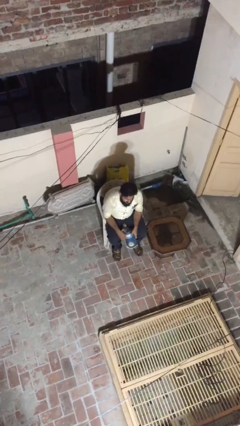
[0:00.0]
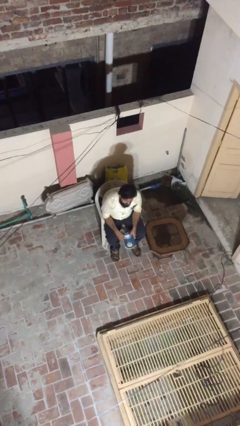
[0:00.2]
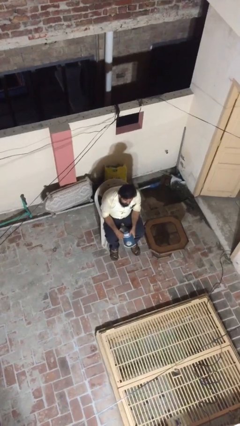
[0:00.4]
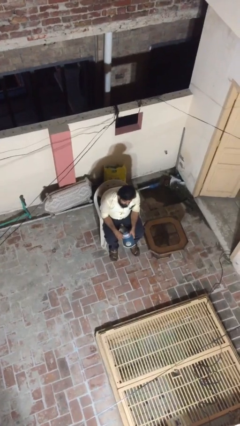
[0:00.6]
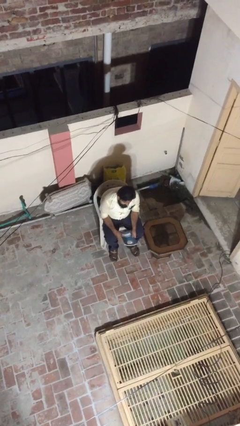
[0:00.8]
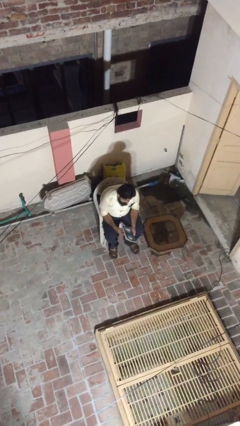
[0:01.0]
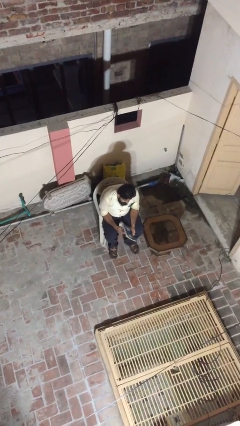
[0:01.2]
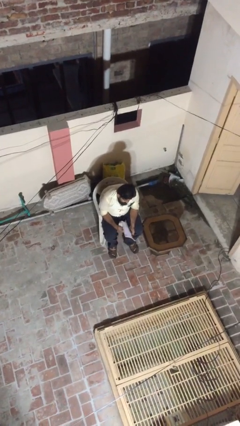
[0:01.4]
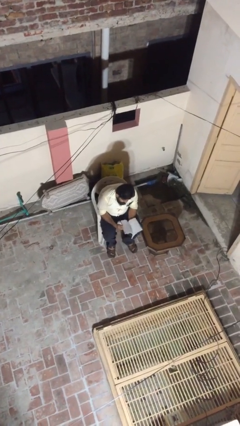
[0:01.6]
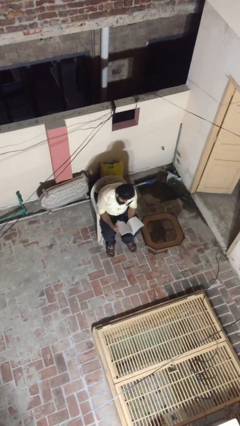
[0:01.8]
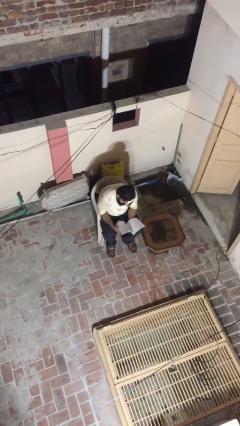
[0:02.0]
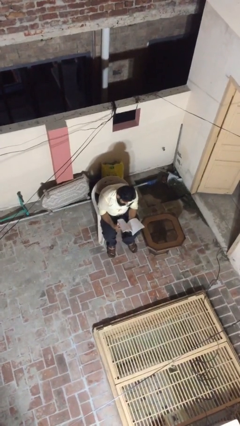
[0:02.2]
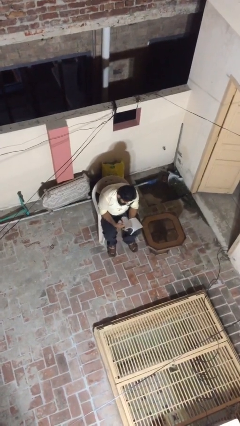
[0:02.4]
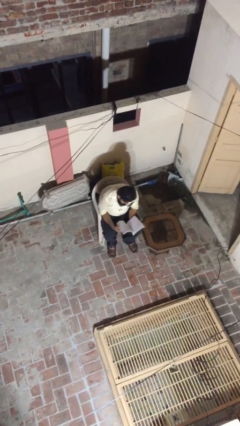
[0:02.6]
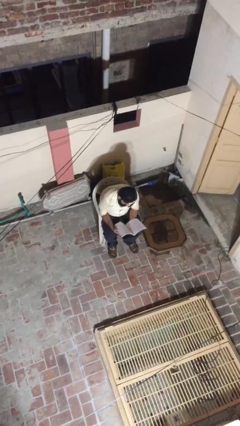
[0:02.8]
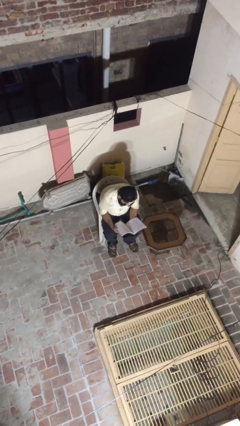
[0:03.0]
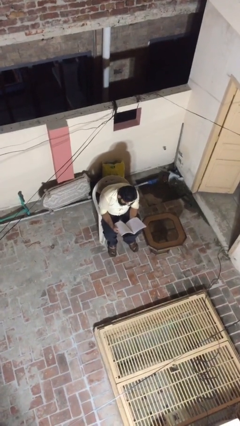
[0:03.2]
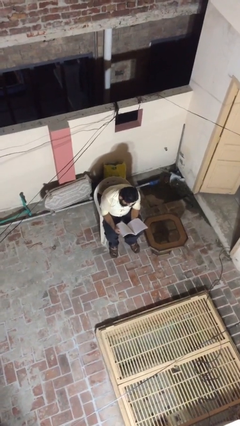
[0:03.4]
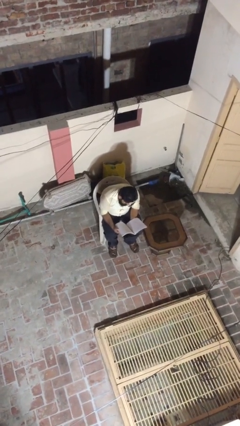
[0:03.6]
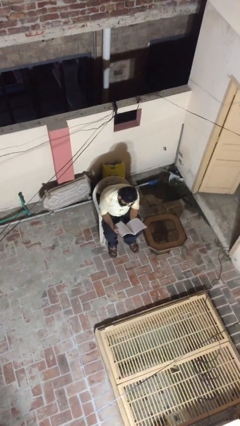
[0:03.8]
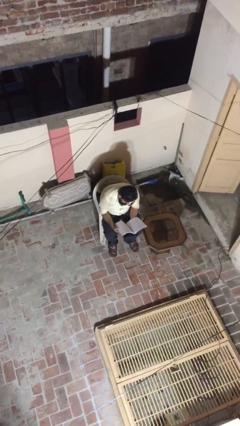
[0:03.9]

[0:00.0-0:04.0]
person reads document

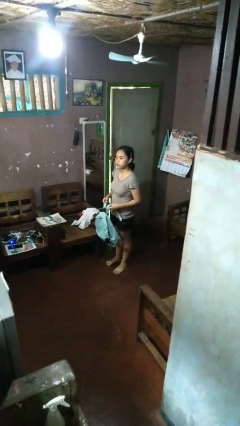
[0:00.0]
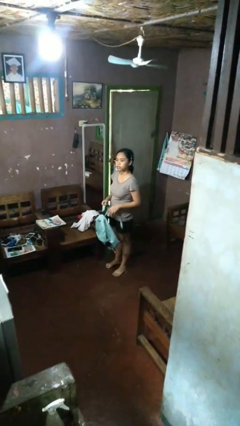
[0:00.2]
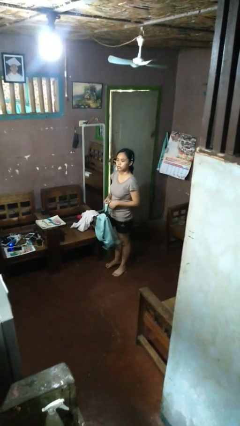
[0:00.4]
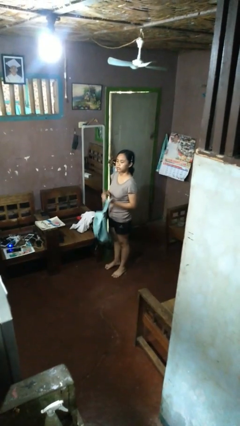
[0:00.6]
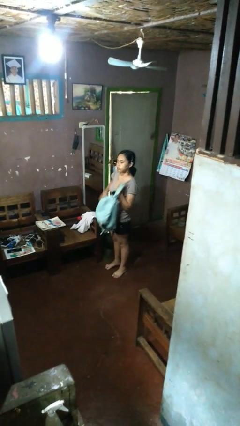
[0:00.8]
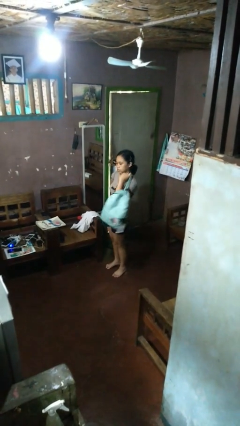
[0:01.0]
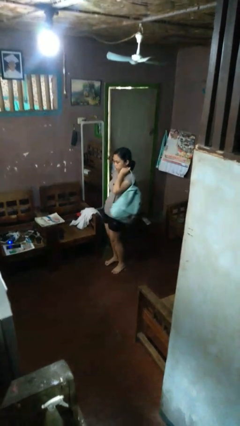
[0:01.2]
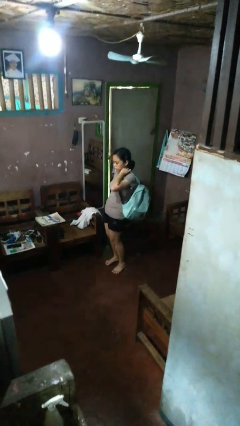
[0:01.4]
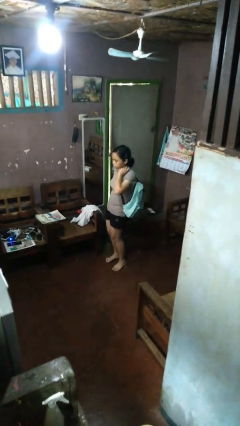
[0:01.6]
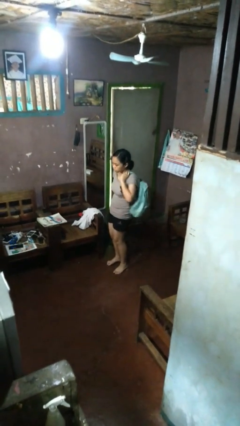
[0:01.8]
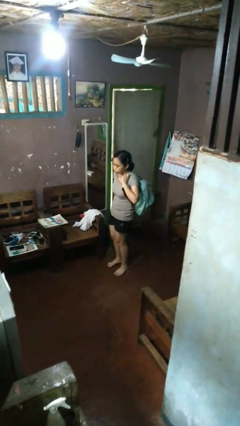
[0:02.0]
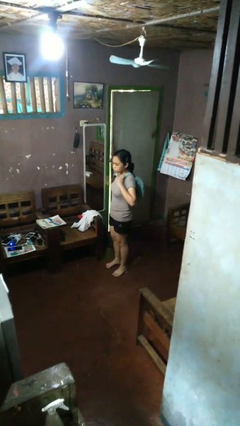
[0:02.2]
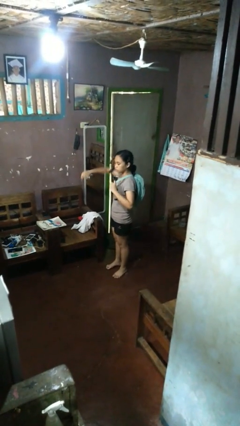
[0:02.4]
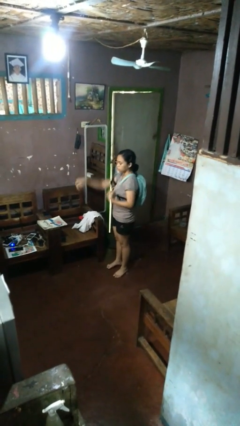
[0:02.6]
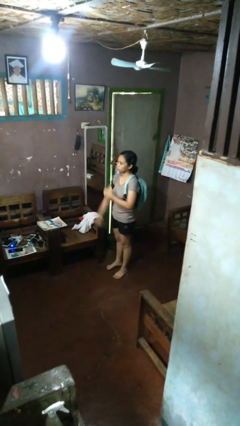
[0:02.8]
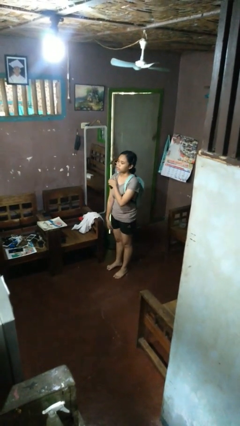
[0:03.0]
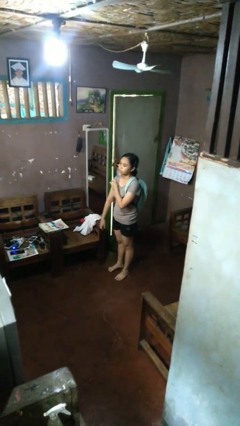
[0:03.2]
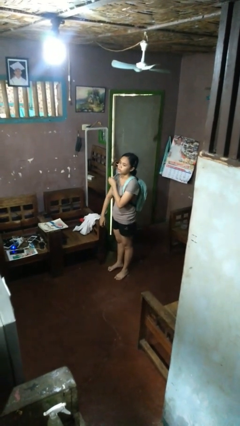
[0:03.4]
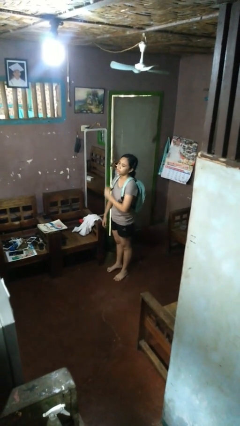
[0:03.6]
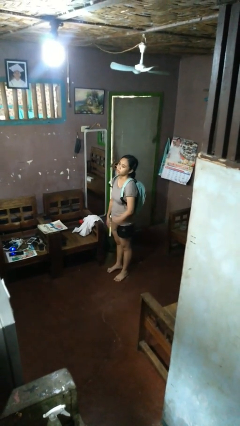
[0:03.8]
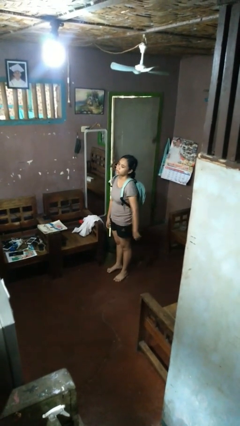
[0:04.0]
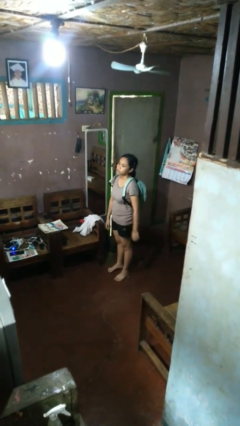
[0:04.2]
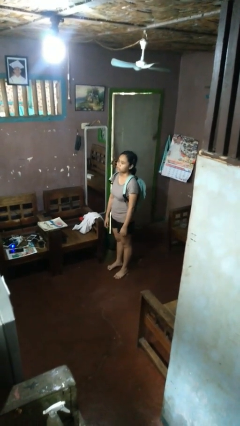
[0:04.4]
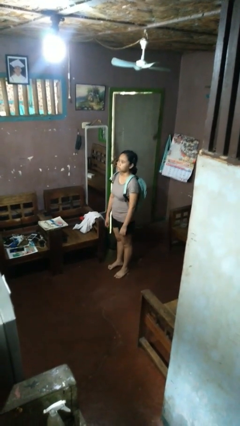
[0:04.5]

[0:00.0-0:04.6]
person puts on backpack

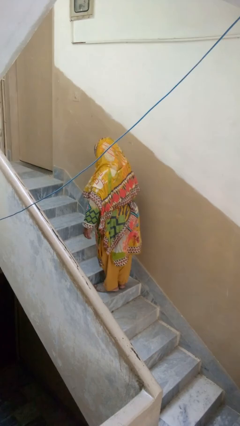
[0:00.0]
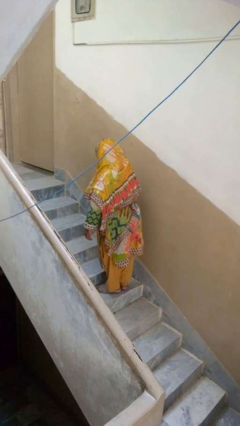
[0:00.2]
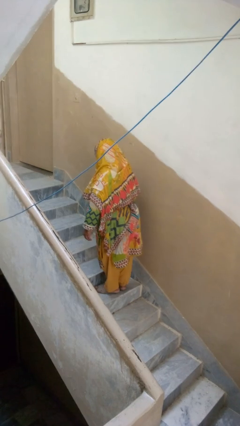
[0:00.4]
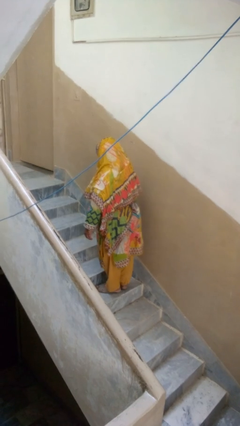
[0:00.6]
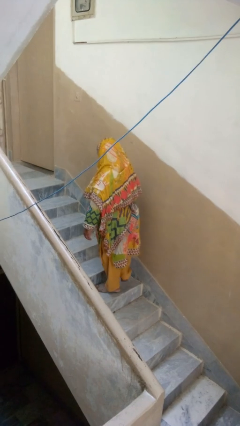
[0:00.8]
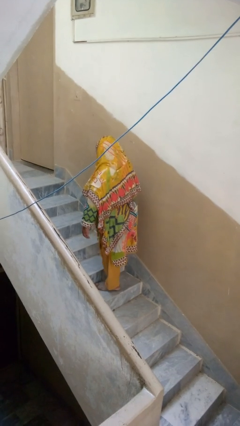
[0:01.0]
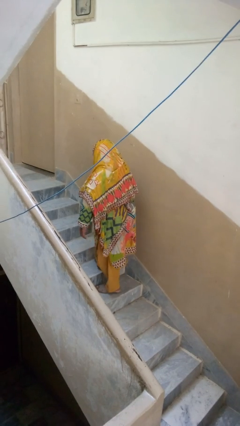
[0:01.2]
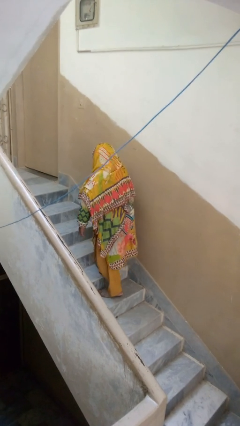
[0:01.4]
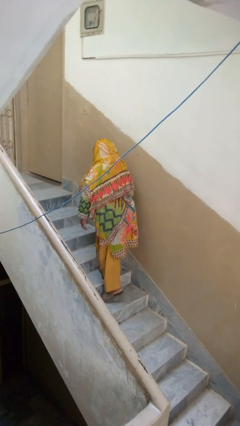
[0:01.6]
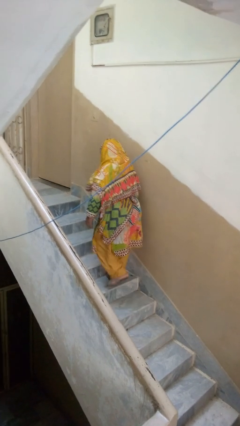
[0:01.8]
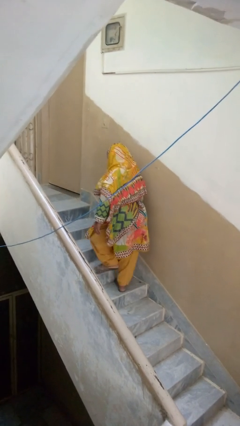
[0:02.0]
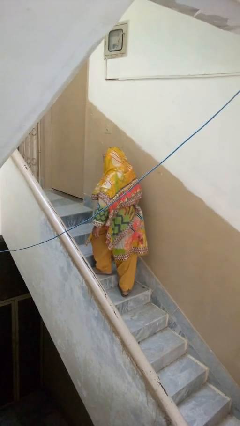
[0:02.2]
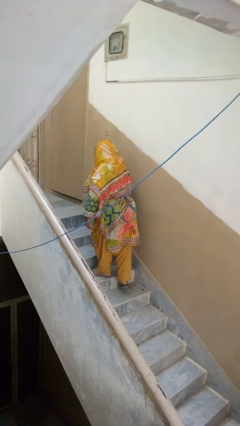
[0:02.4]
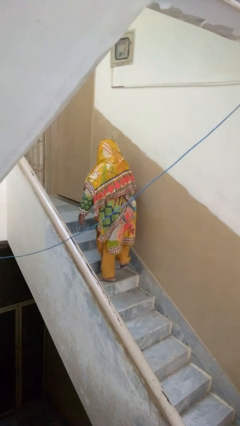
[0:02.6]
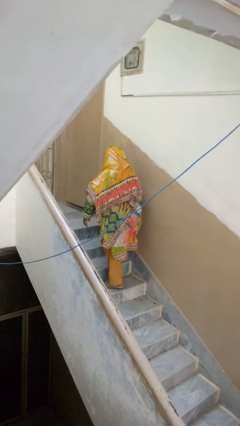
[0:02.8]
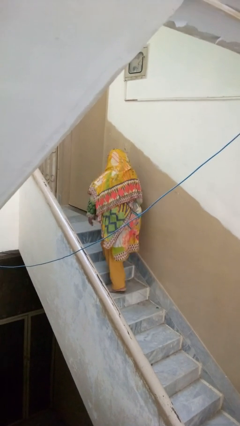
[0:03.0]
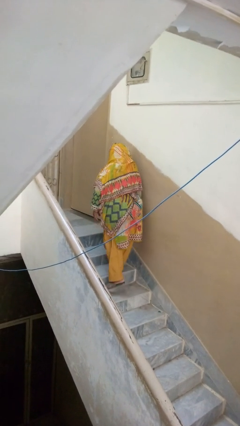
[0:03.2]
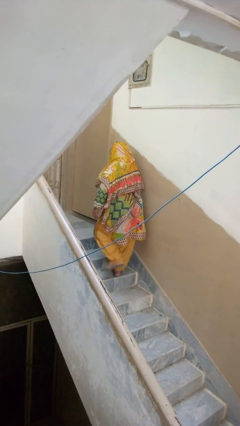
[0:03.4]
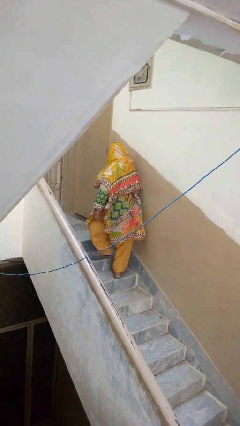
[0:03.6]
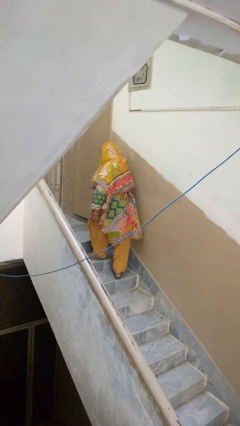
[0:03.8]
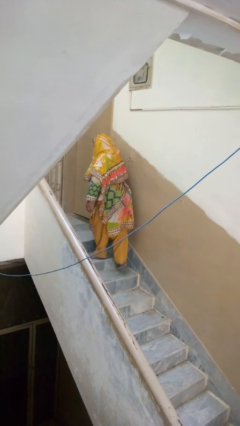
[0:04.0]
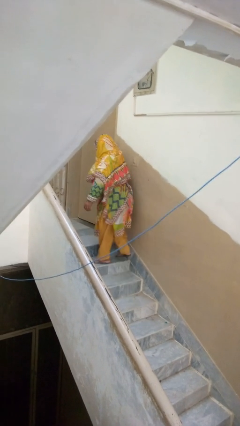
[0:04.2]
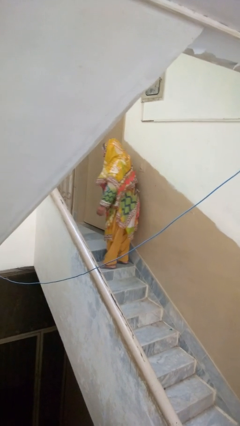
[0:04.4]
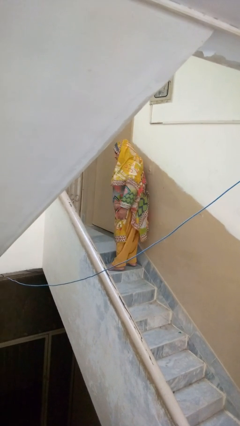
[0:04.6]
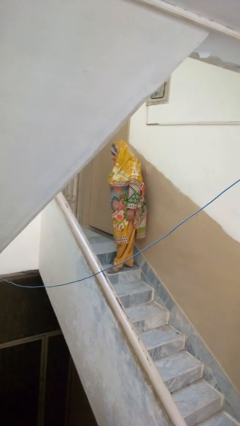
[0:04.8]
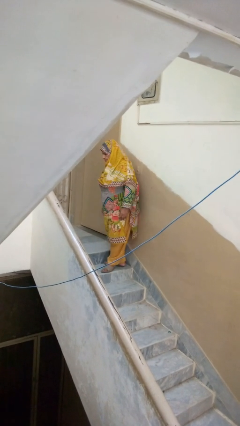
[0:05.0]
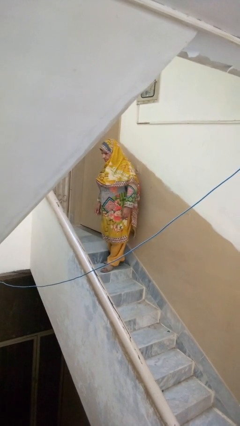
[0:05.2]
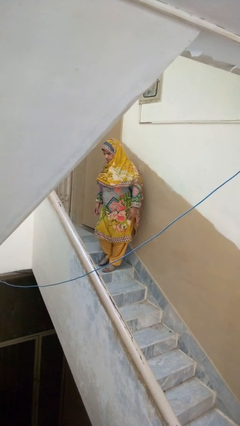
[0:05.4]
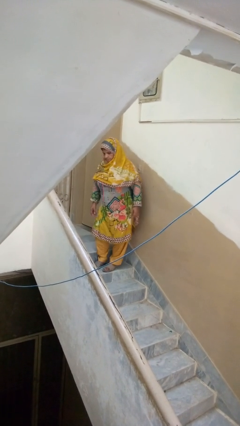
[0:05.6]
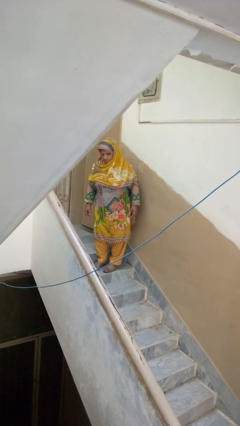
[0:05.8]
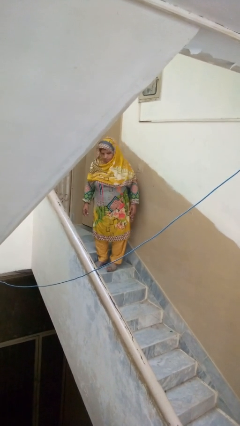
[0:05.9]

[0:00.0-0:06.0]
person climbs up stairs

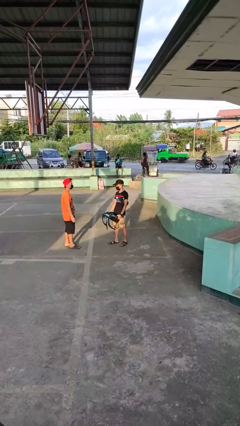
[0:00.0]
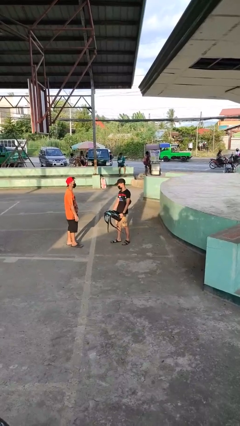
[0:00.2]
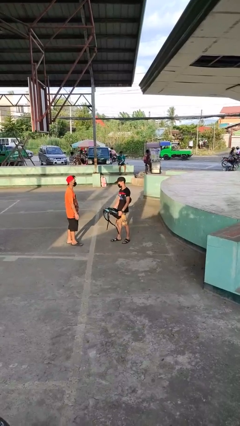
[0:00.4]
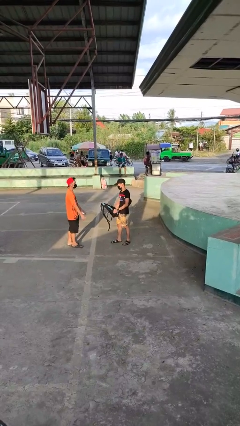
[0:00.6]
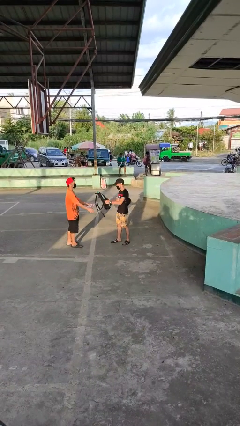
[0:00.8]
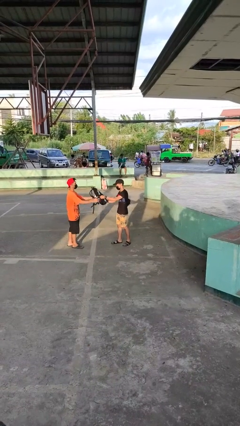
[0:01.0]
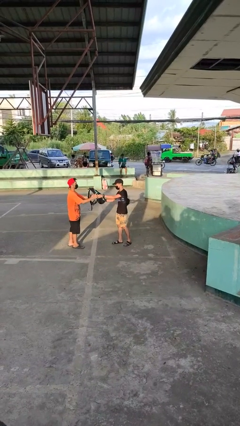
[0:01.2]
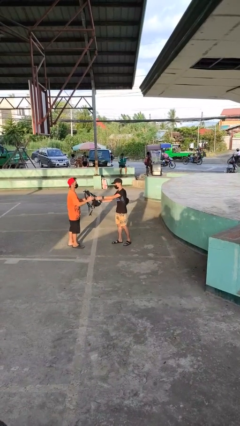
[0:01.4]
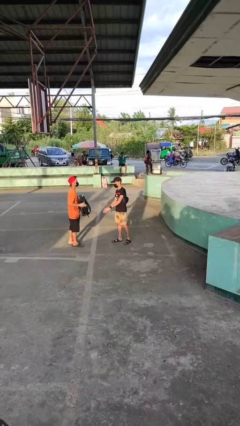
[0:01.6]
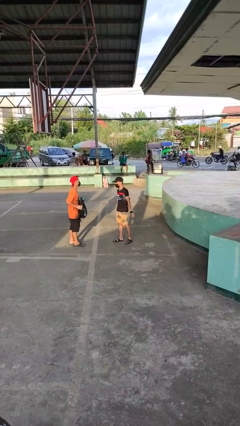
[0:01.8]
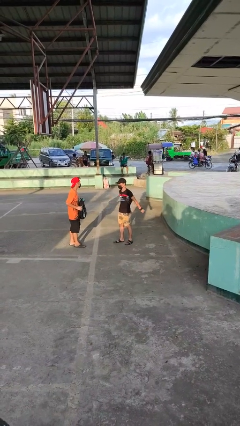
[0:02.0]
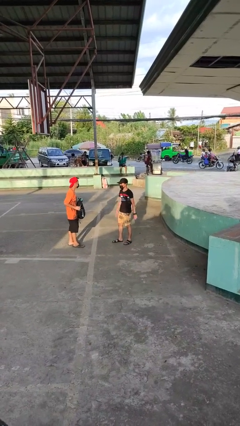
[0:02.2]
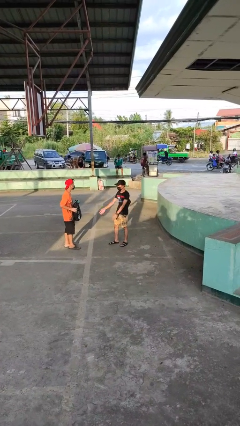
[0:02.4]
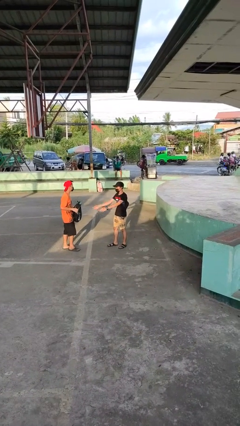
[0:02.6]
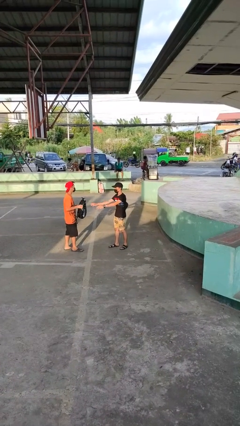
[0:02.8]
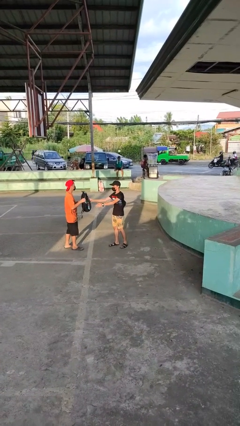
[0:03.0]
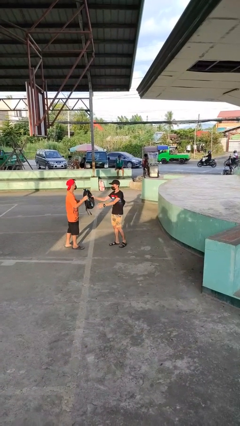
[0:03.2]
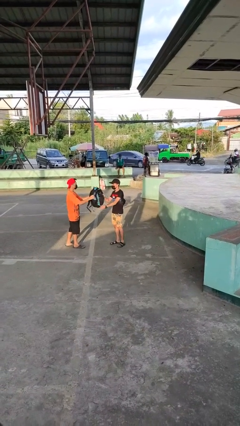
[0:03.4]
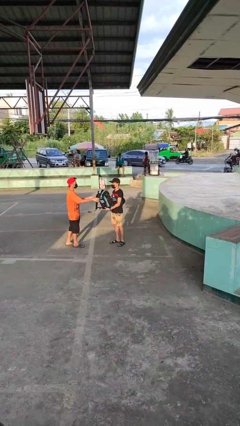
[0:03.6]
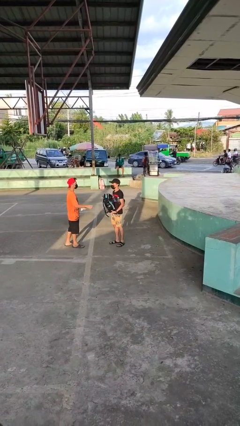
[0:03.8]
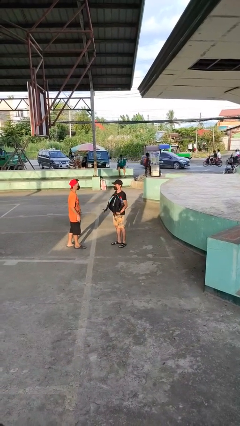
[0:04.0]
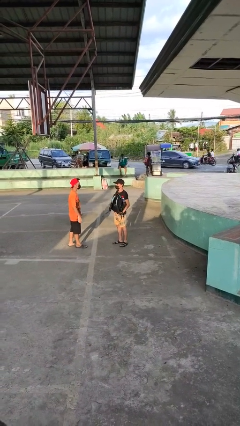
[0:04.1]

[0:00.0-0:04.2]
person transfers object to person
